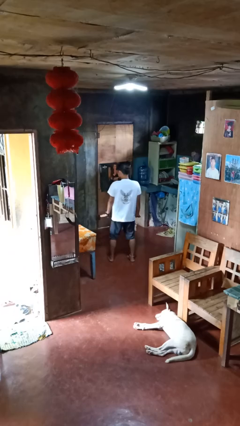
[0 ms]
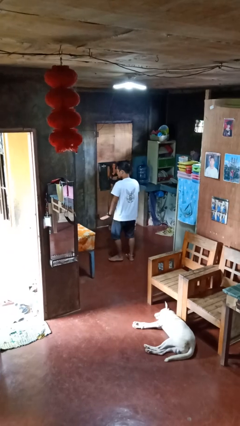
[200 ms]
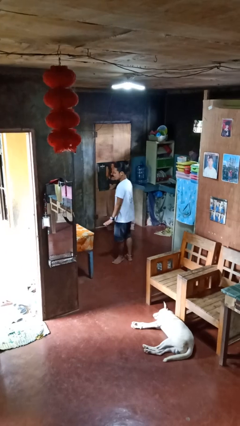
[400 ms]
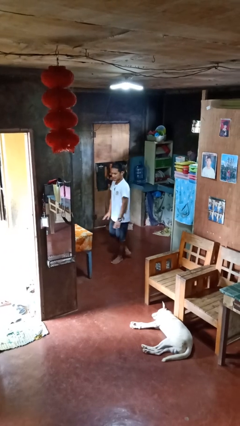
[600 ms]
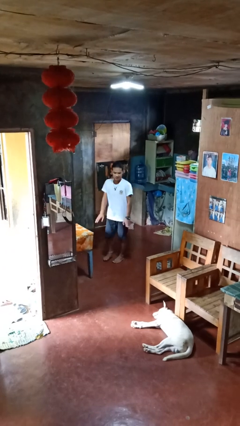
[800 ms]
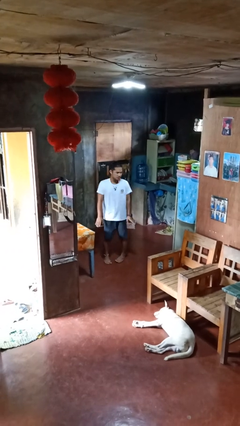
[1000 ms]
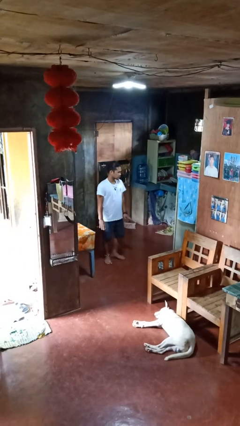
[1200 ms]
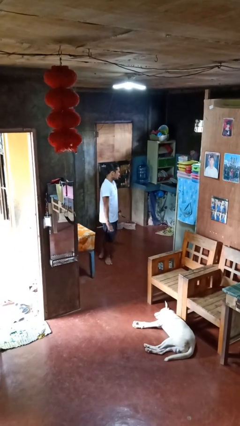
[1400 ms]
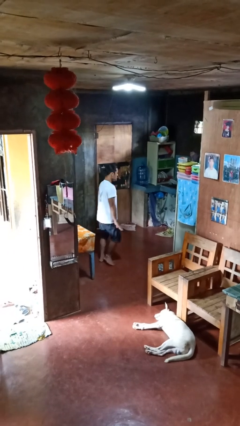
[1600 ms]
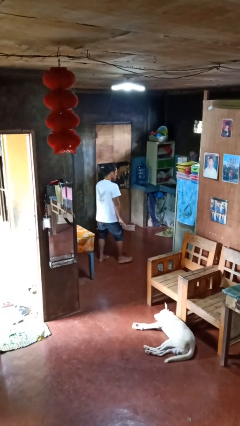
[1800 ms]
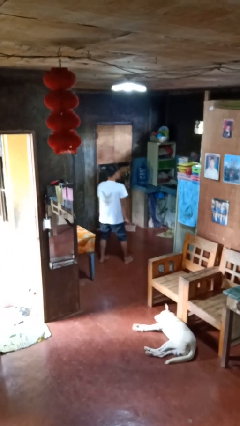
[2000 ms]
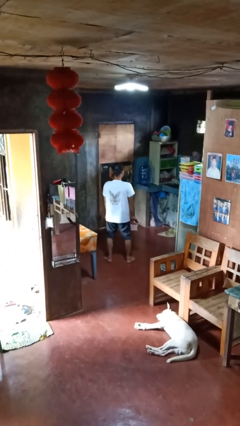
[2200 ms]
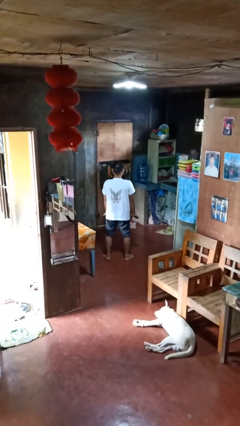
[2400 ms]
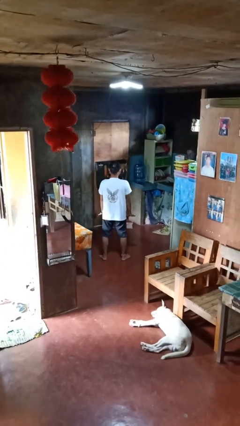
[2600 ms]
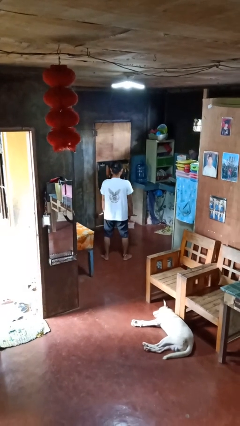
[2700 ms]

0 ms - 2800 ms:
person twirls

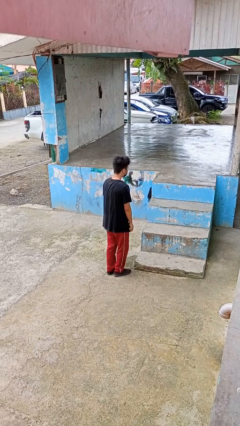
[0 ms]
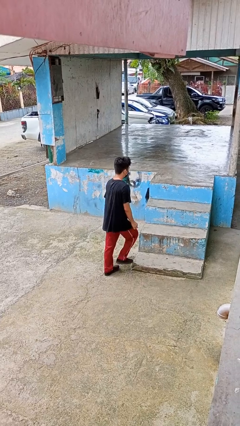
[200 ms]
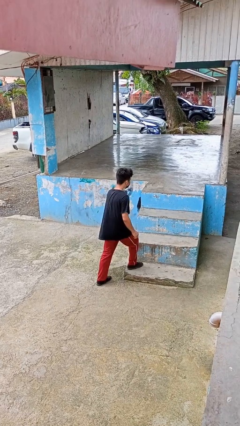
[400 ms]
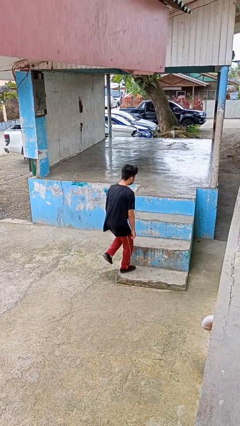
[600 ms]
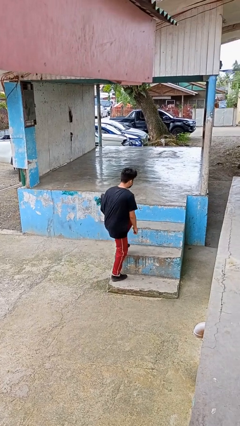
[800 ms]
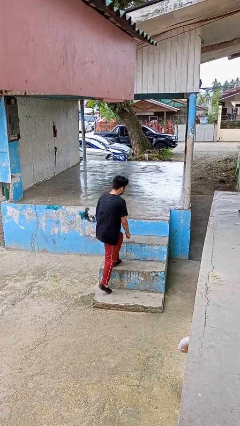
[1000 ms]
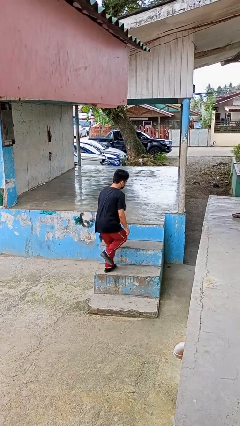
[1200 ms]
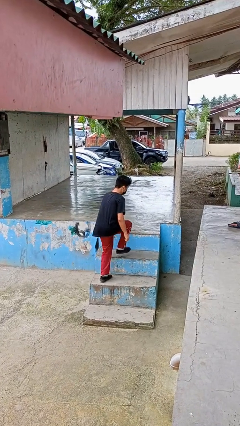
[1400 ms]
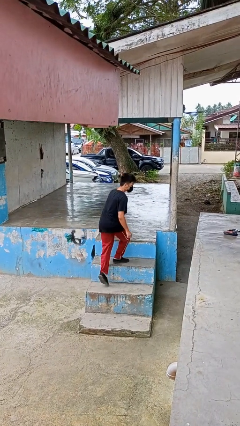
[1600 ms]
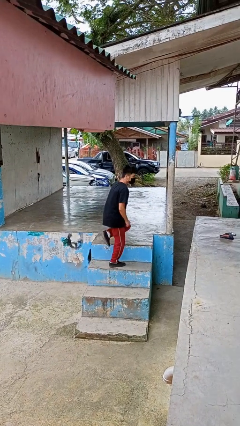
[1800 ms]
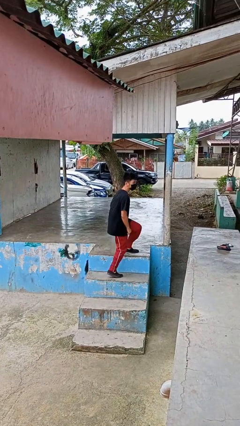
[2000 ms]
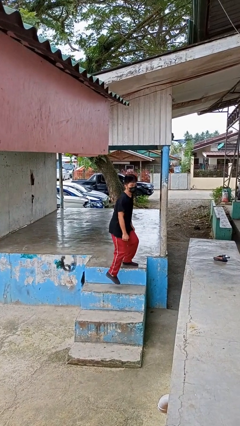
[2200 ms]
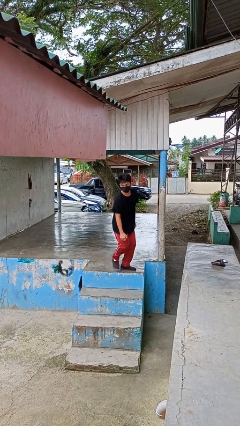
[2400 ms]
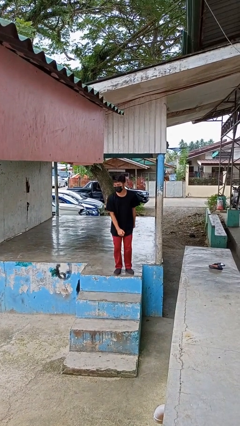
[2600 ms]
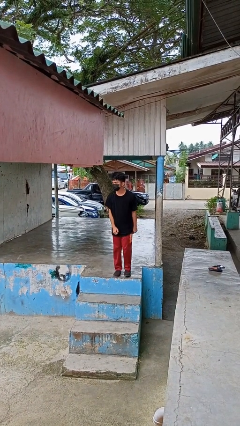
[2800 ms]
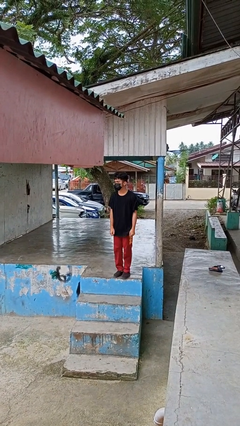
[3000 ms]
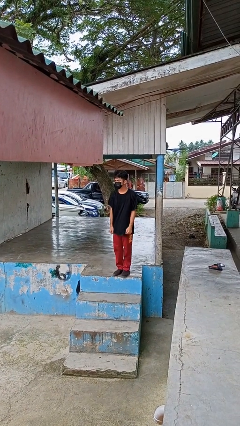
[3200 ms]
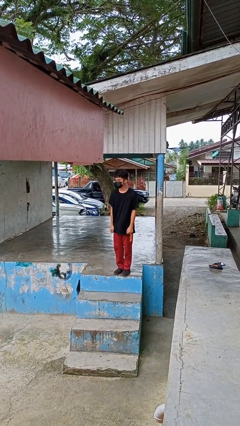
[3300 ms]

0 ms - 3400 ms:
person climbs up stairs

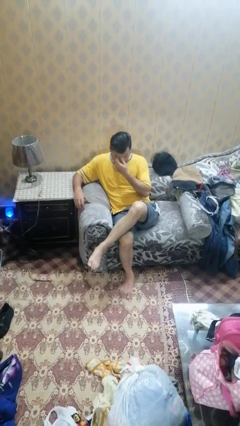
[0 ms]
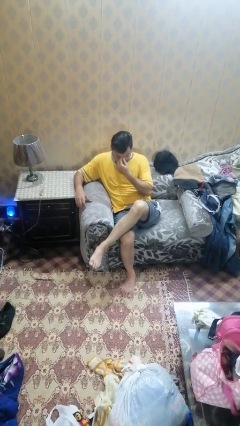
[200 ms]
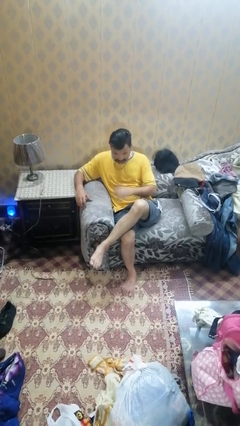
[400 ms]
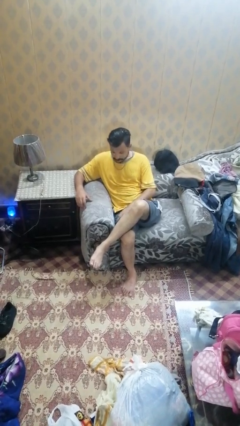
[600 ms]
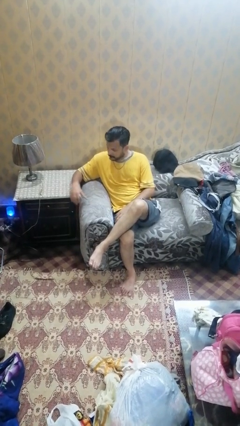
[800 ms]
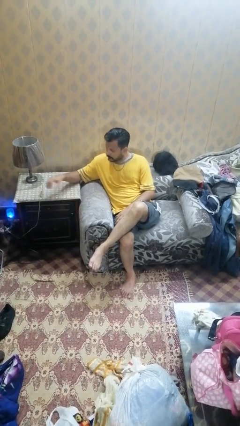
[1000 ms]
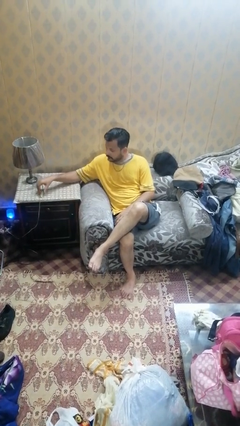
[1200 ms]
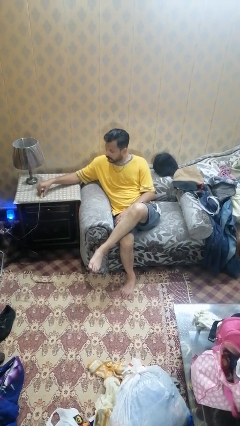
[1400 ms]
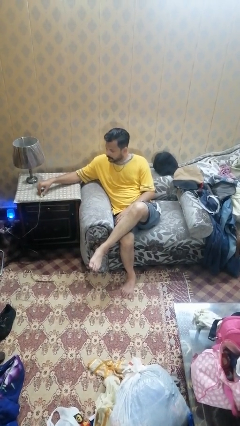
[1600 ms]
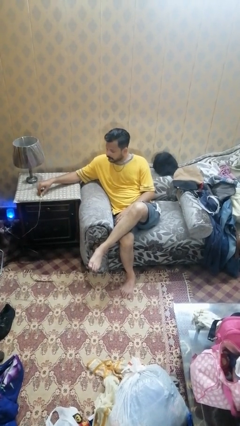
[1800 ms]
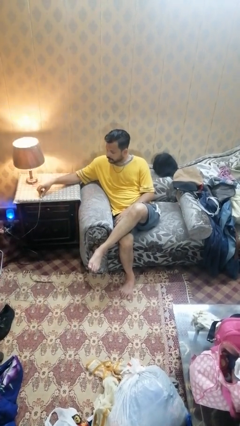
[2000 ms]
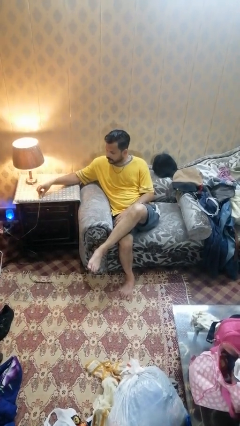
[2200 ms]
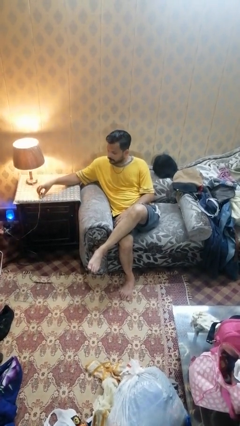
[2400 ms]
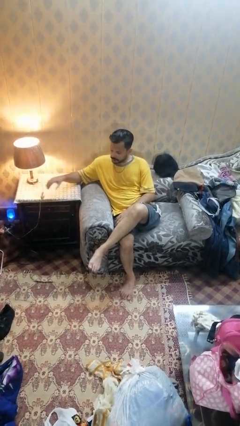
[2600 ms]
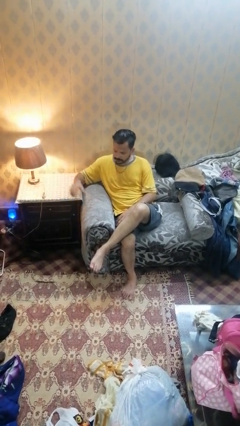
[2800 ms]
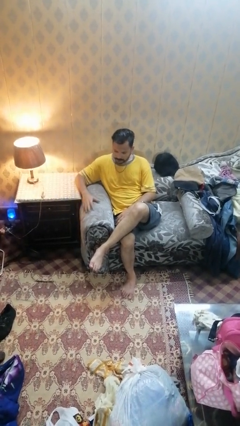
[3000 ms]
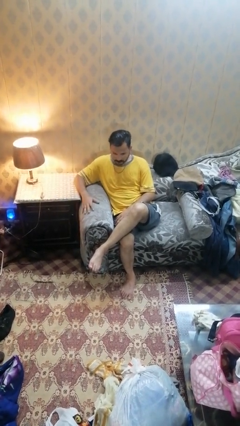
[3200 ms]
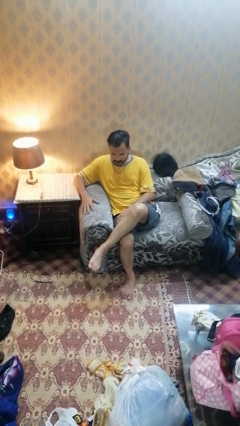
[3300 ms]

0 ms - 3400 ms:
person turns on lamp

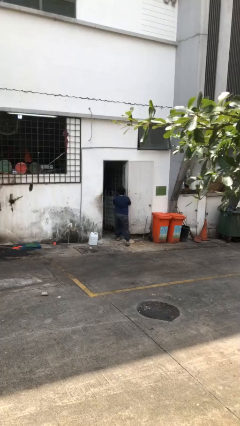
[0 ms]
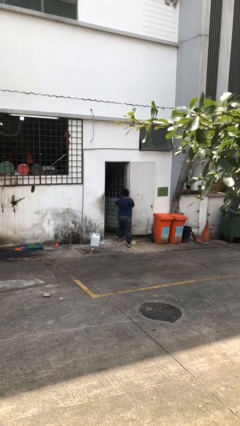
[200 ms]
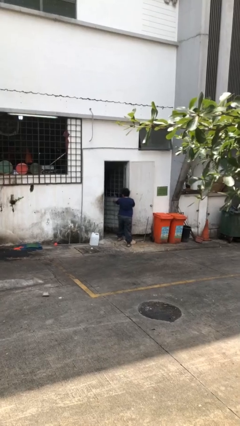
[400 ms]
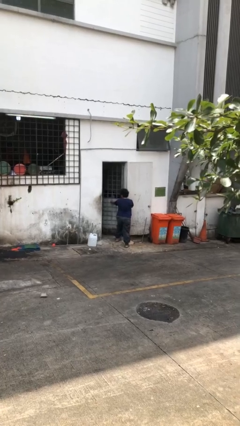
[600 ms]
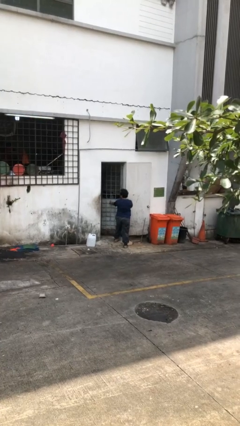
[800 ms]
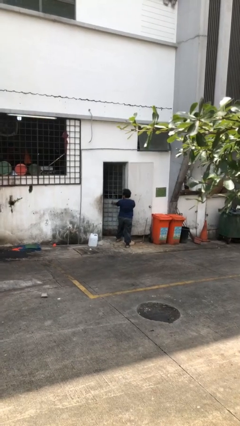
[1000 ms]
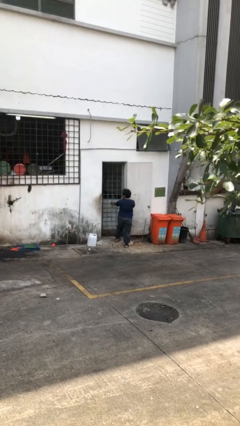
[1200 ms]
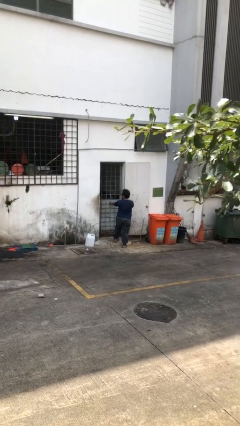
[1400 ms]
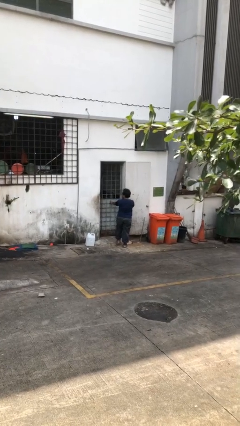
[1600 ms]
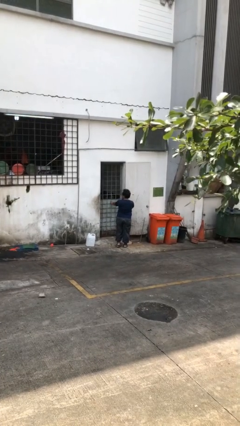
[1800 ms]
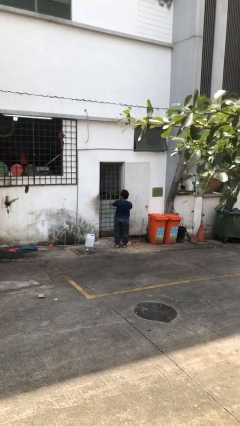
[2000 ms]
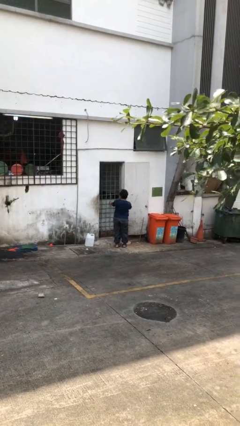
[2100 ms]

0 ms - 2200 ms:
person closes facility door

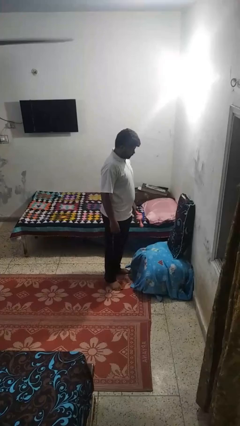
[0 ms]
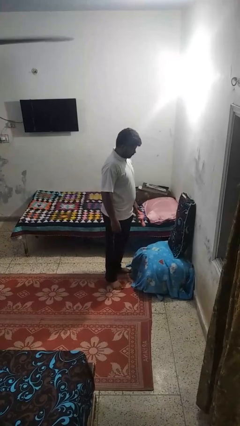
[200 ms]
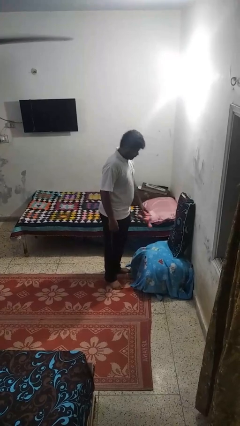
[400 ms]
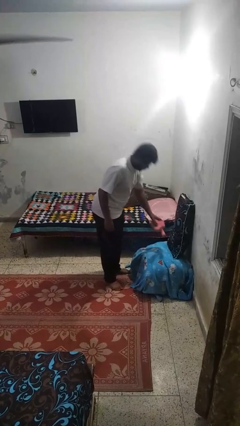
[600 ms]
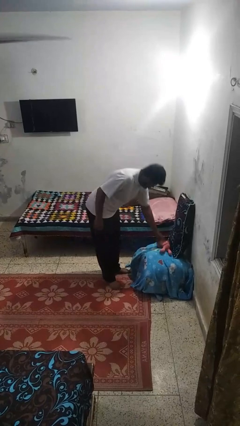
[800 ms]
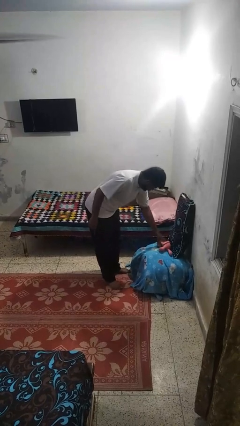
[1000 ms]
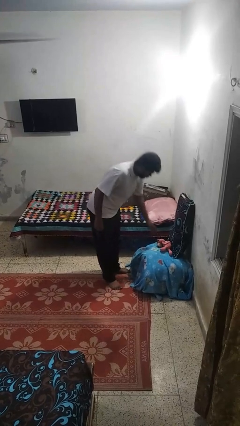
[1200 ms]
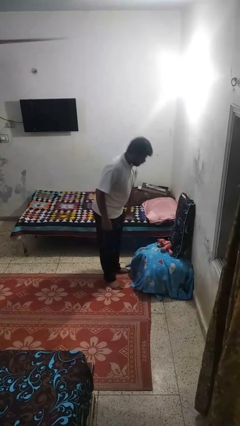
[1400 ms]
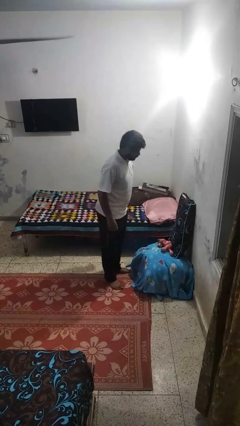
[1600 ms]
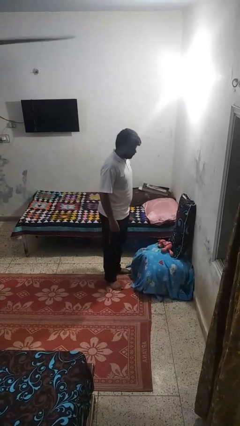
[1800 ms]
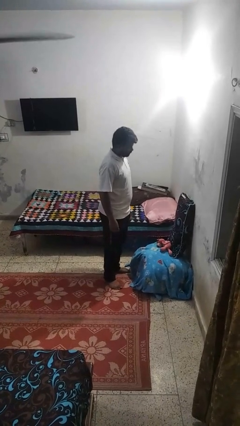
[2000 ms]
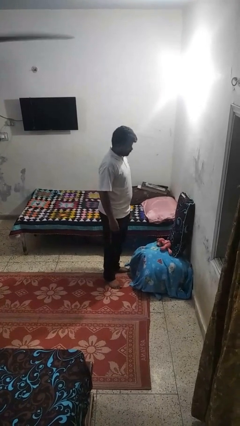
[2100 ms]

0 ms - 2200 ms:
person puts down object on couch

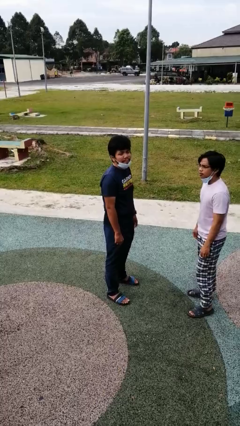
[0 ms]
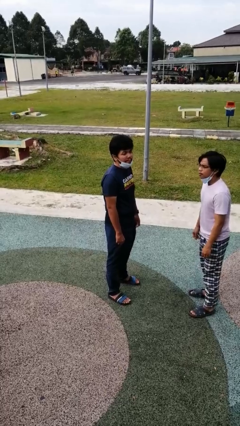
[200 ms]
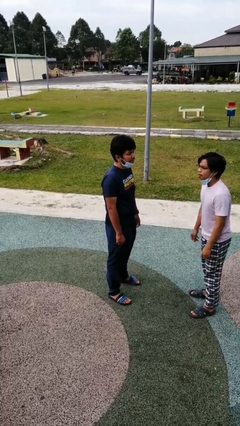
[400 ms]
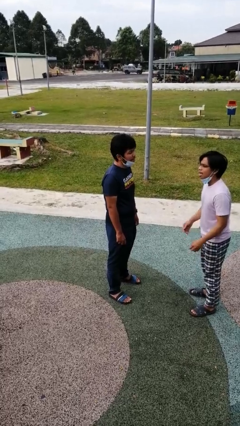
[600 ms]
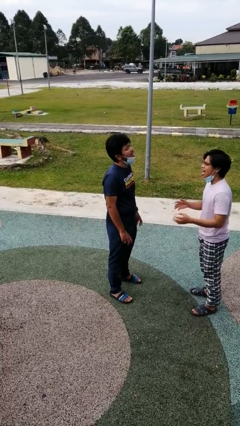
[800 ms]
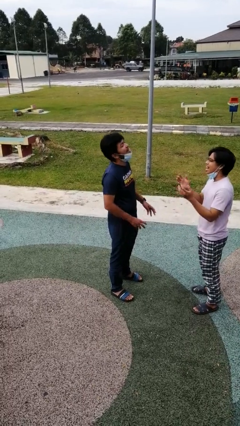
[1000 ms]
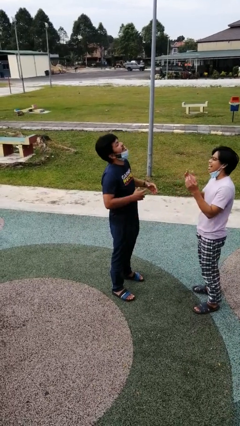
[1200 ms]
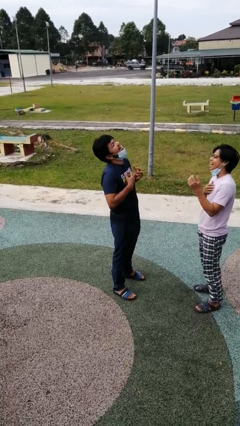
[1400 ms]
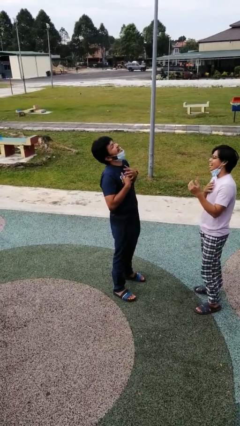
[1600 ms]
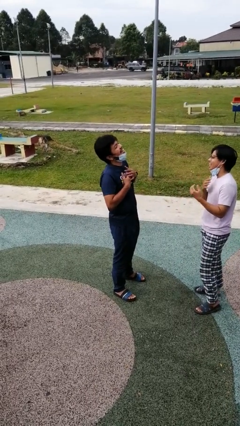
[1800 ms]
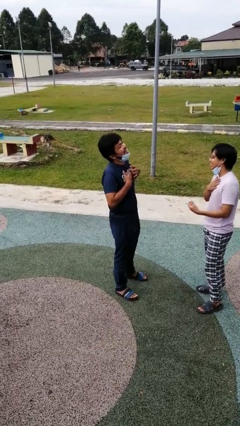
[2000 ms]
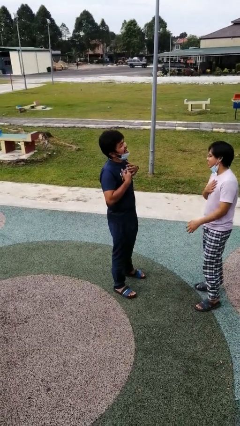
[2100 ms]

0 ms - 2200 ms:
person laughs with person

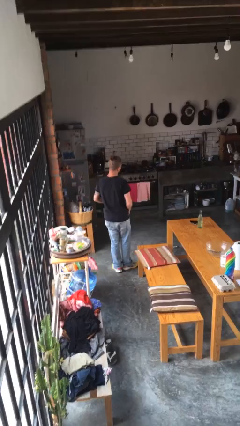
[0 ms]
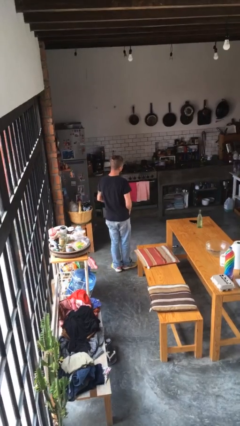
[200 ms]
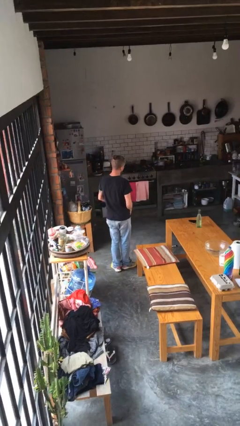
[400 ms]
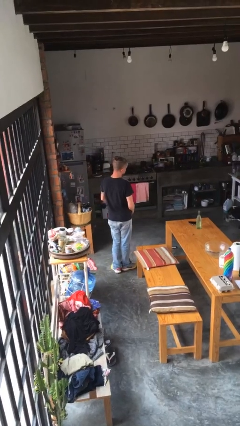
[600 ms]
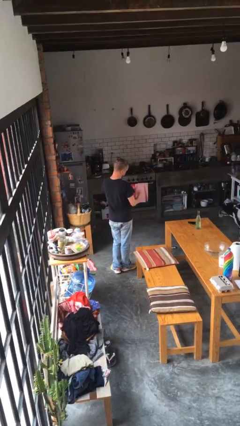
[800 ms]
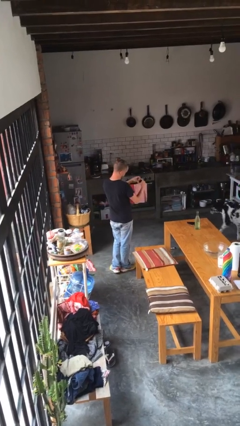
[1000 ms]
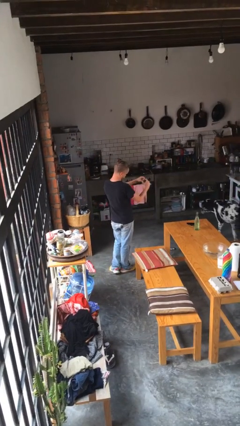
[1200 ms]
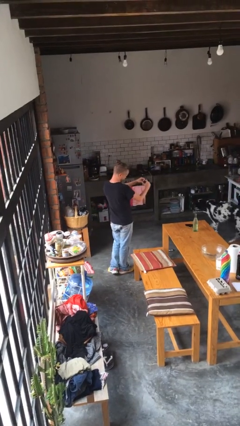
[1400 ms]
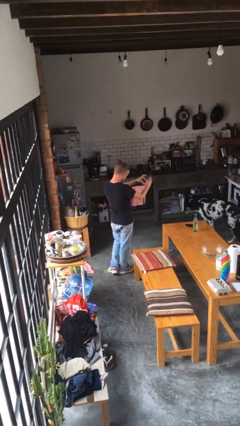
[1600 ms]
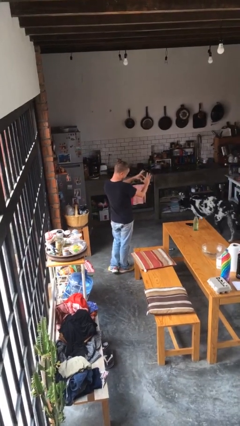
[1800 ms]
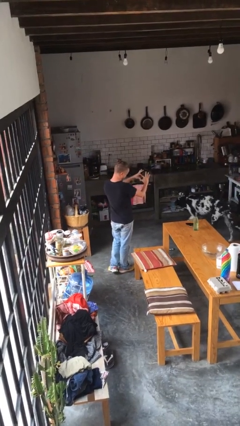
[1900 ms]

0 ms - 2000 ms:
person gestures heart
